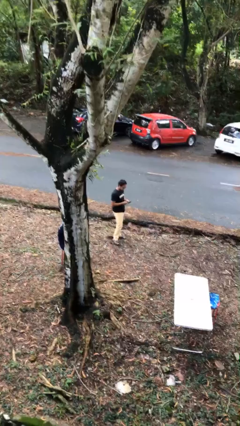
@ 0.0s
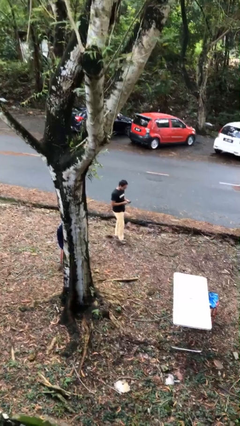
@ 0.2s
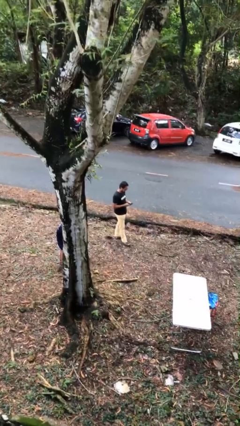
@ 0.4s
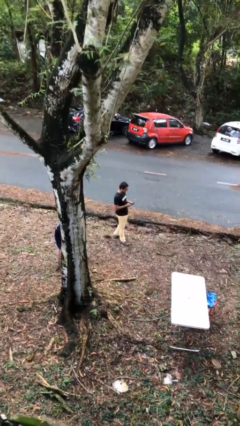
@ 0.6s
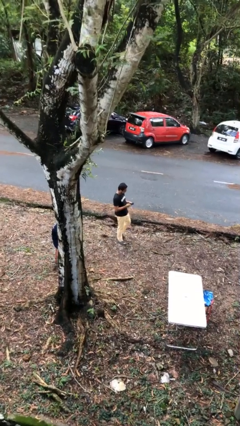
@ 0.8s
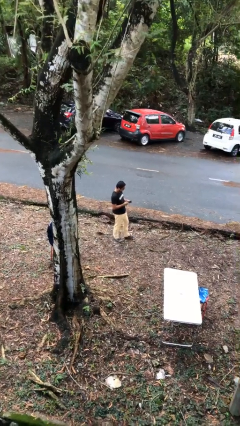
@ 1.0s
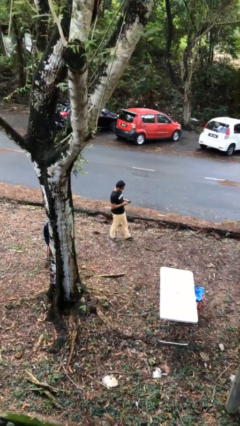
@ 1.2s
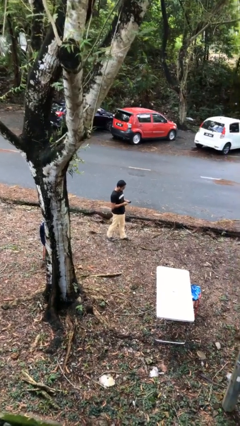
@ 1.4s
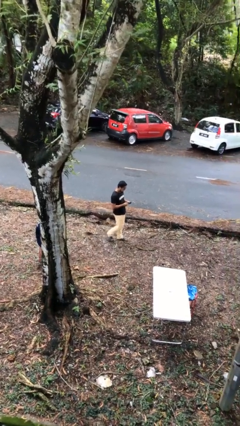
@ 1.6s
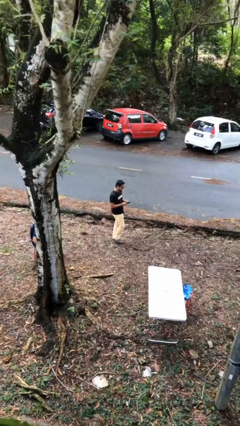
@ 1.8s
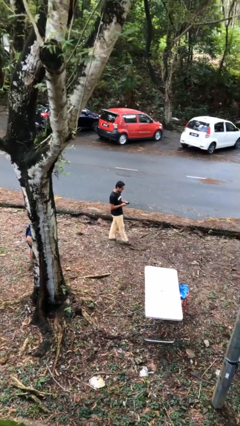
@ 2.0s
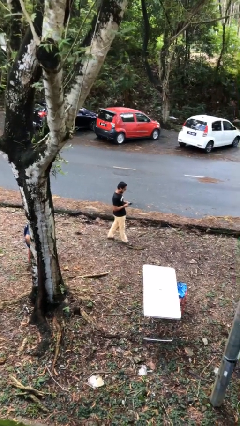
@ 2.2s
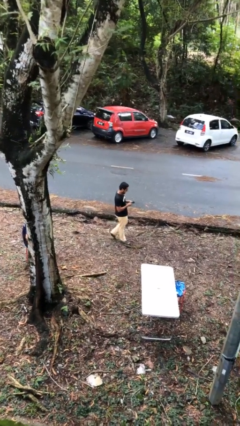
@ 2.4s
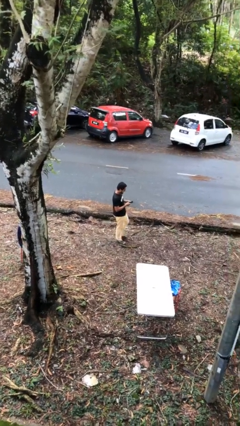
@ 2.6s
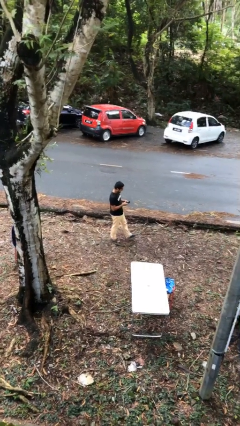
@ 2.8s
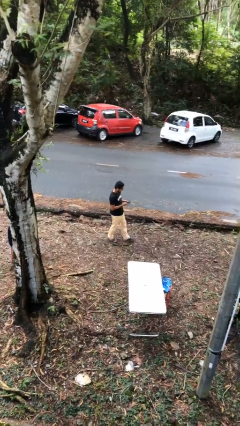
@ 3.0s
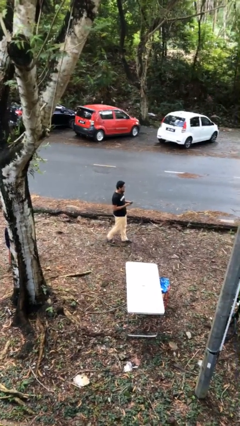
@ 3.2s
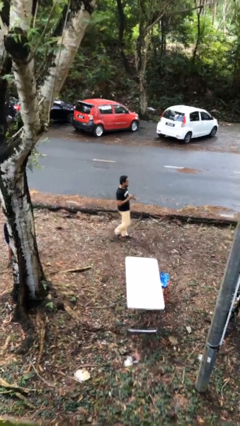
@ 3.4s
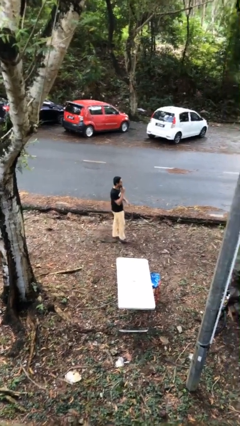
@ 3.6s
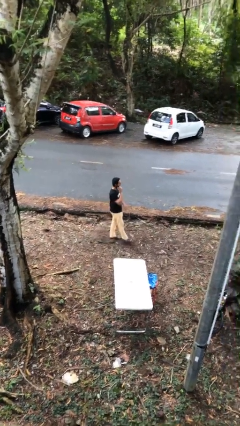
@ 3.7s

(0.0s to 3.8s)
person texts on phone

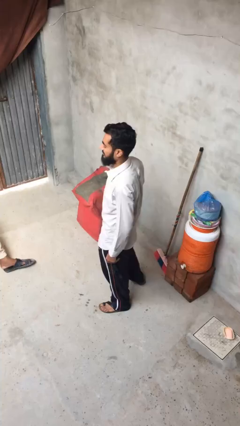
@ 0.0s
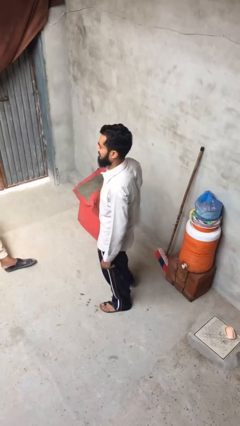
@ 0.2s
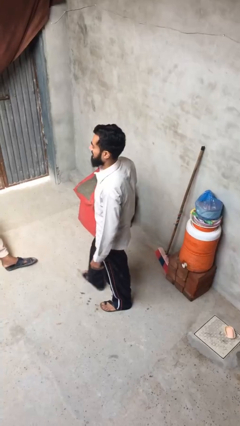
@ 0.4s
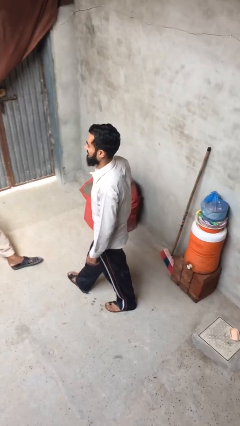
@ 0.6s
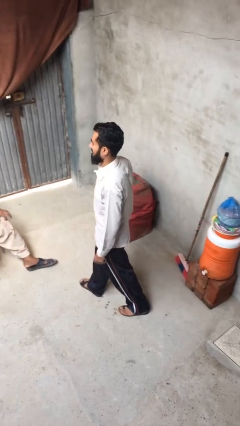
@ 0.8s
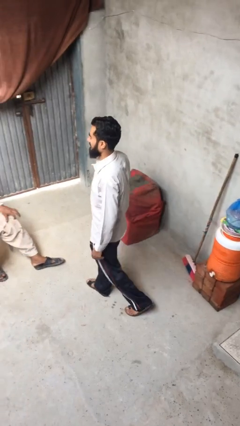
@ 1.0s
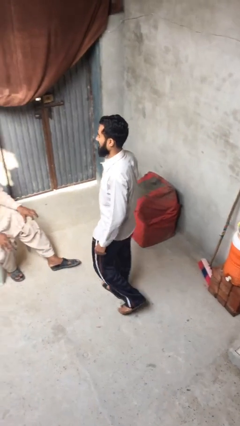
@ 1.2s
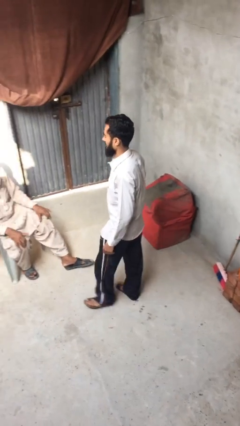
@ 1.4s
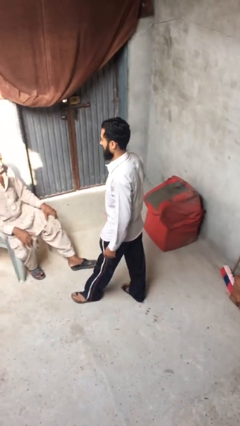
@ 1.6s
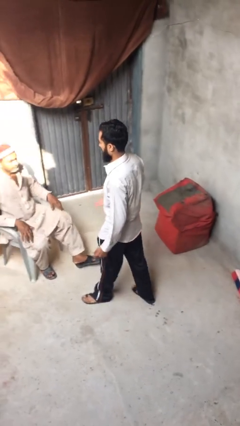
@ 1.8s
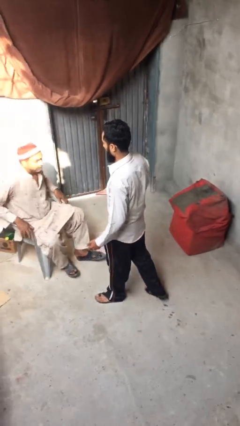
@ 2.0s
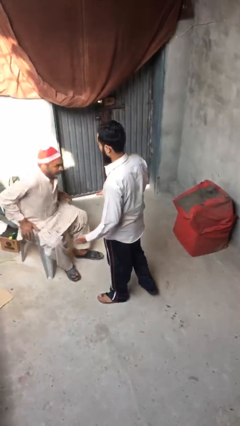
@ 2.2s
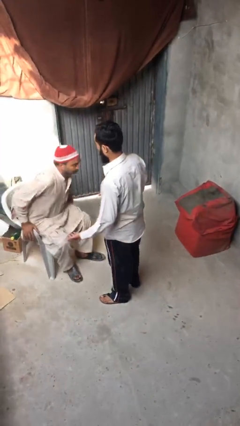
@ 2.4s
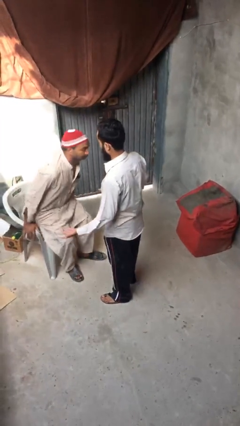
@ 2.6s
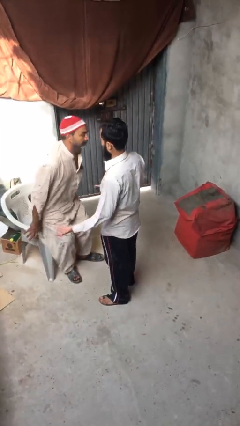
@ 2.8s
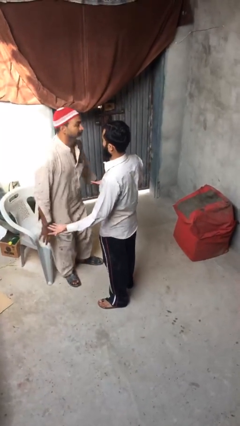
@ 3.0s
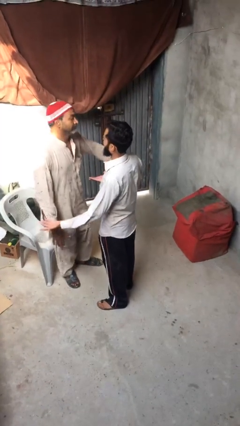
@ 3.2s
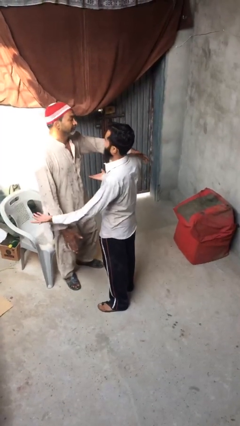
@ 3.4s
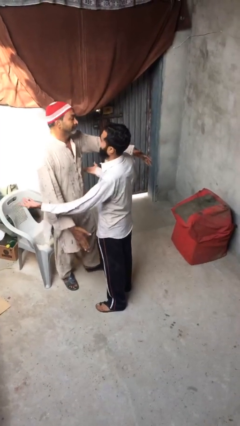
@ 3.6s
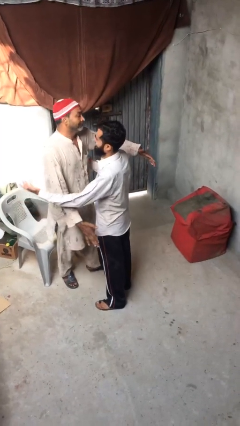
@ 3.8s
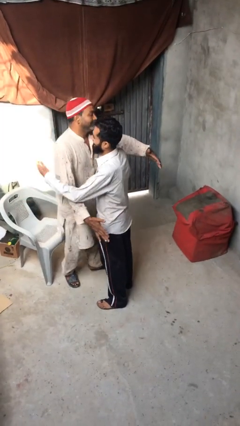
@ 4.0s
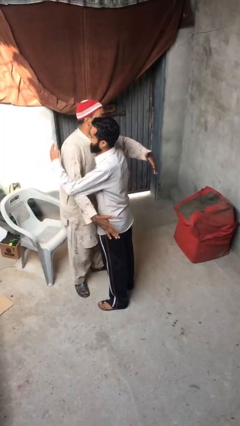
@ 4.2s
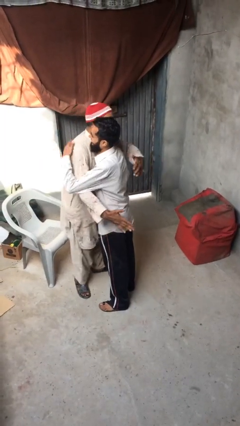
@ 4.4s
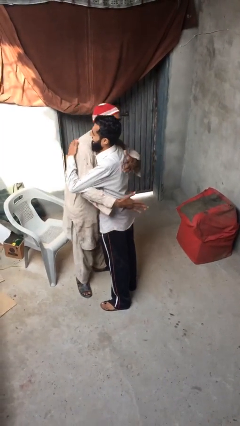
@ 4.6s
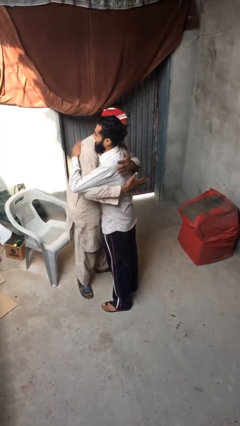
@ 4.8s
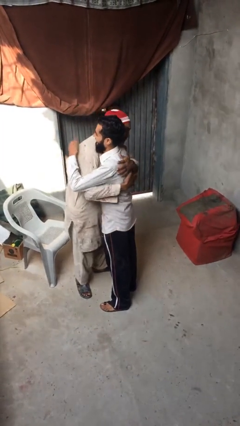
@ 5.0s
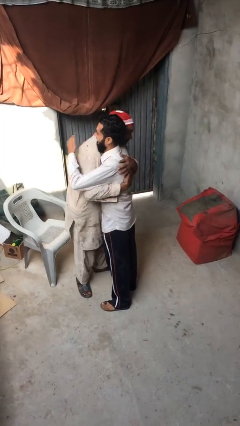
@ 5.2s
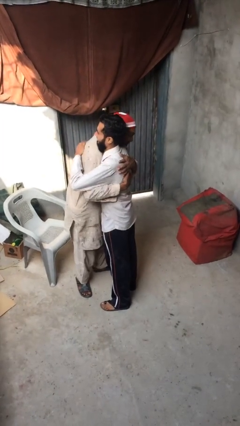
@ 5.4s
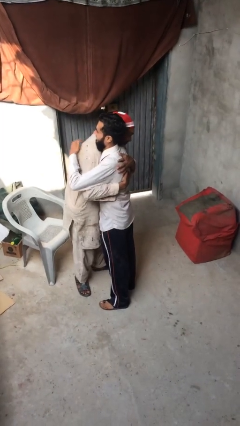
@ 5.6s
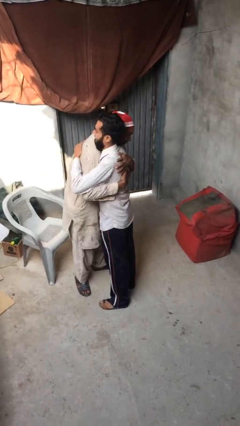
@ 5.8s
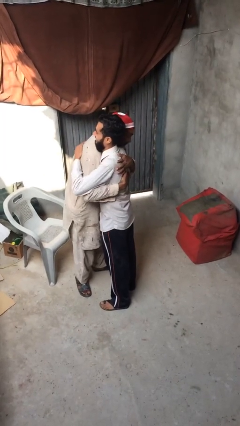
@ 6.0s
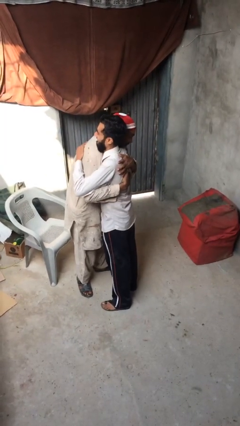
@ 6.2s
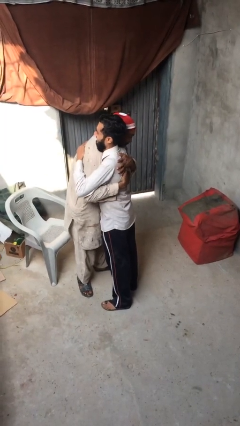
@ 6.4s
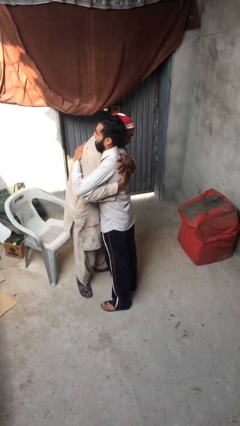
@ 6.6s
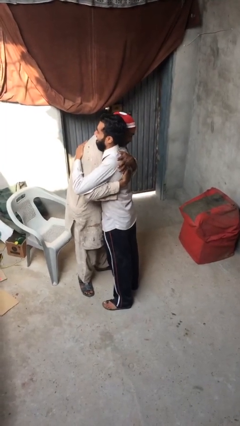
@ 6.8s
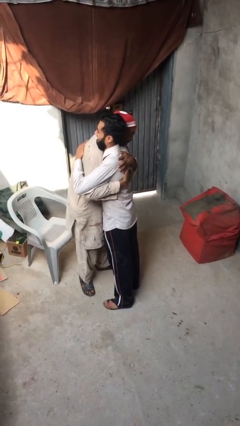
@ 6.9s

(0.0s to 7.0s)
person embraces person

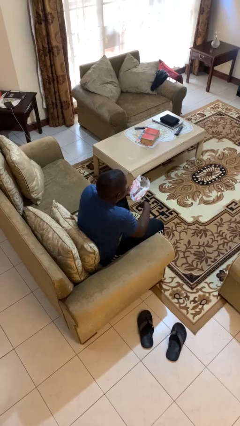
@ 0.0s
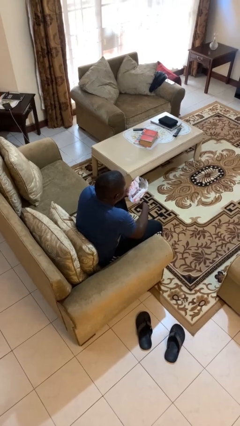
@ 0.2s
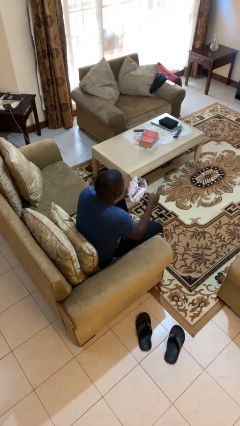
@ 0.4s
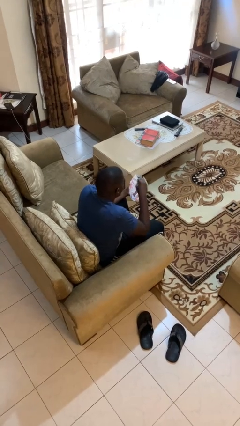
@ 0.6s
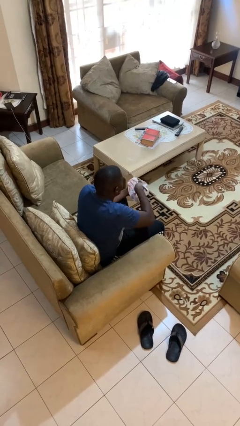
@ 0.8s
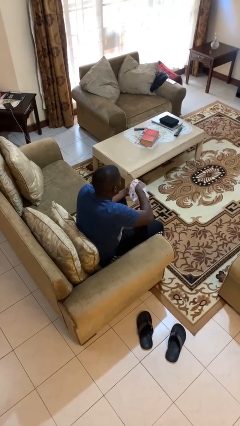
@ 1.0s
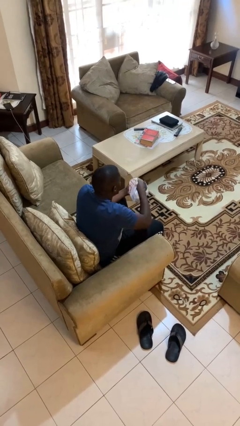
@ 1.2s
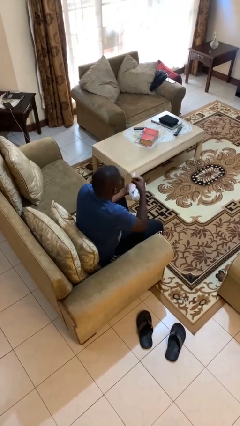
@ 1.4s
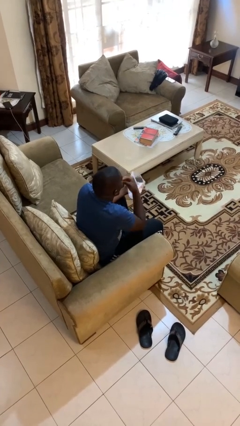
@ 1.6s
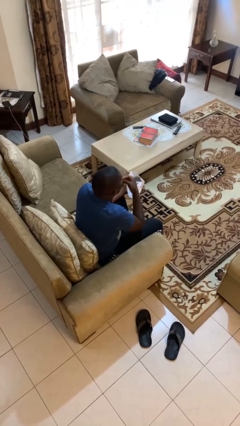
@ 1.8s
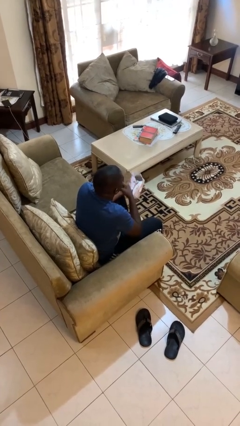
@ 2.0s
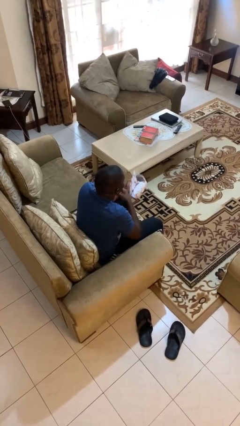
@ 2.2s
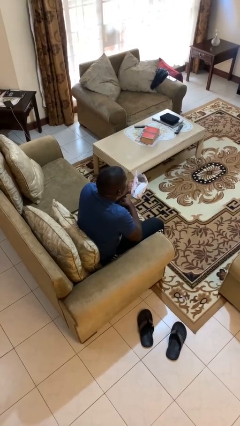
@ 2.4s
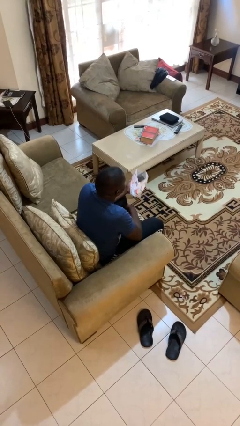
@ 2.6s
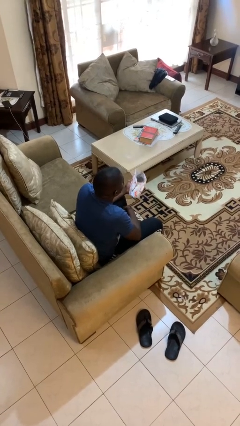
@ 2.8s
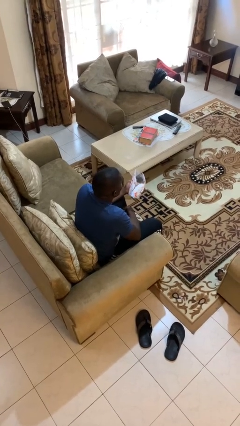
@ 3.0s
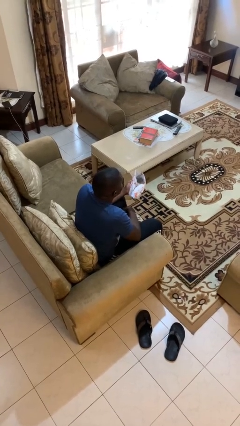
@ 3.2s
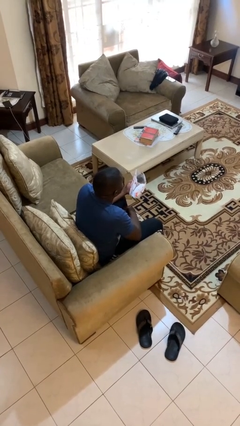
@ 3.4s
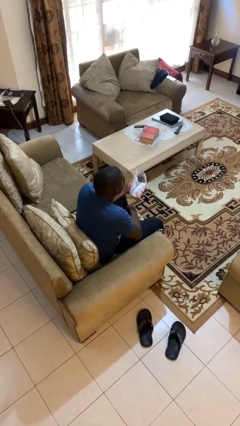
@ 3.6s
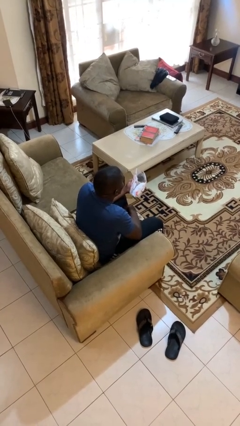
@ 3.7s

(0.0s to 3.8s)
person eats snack from bag

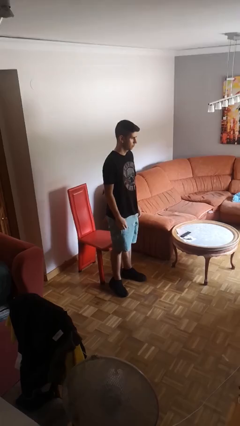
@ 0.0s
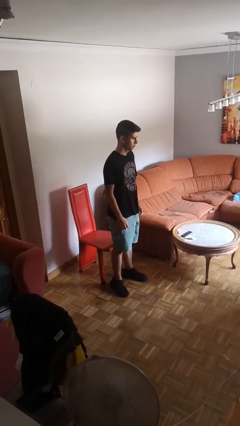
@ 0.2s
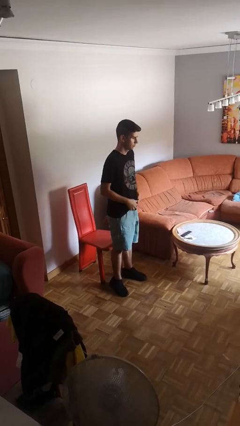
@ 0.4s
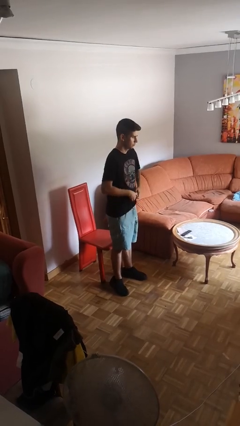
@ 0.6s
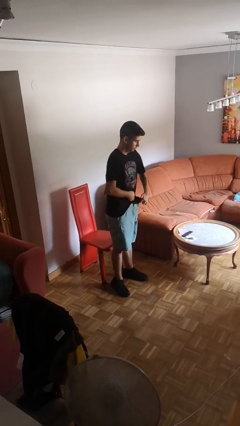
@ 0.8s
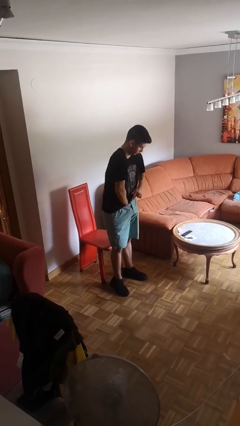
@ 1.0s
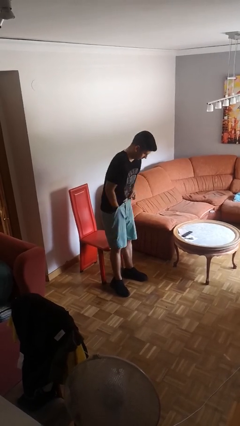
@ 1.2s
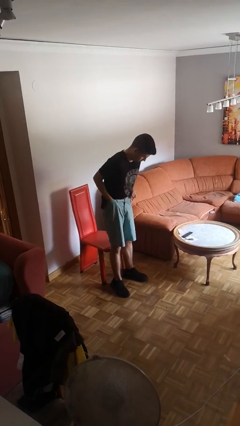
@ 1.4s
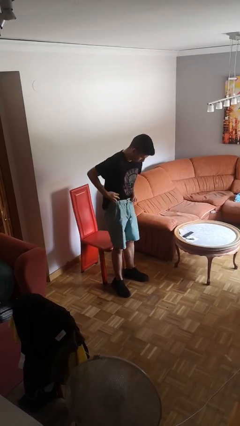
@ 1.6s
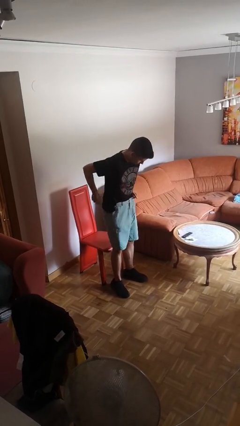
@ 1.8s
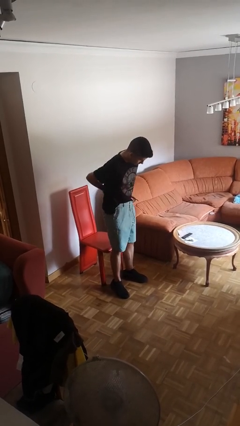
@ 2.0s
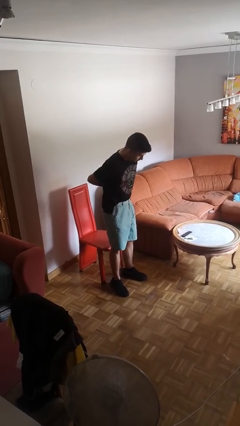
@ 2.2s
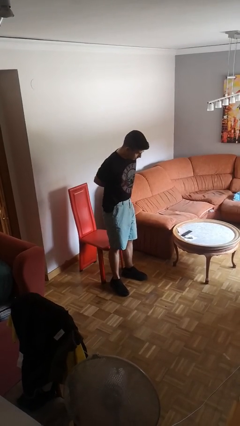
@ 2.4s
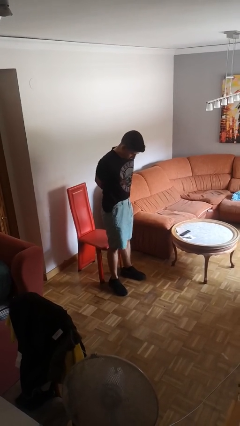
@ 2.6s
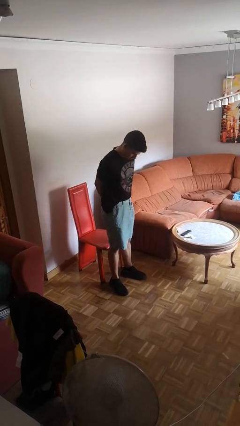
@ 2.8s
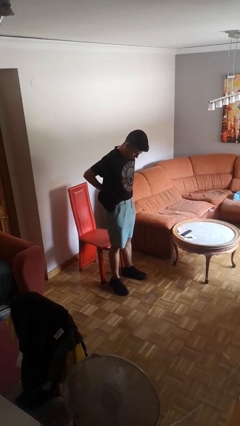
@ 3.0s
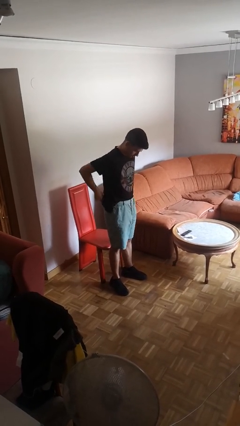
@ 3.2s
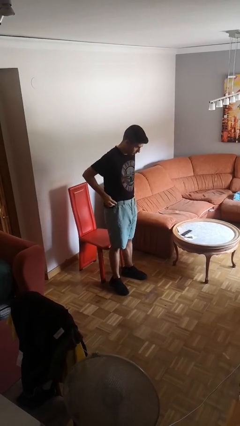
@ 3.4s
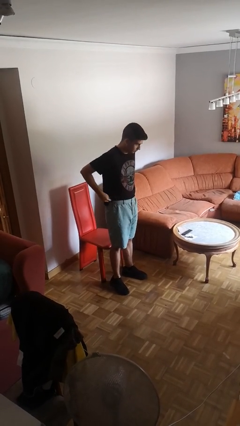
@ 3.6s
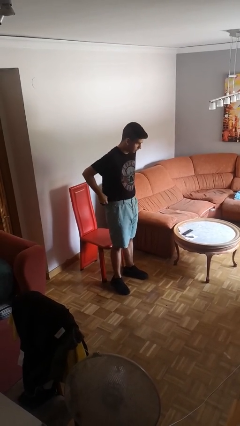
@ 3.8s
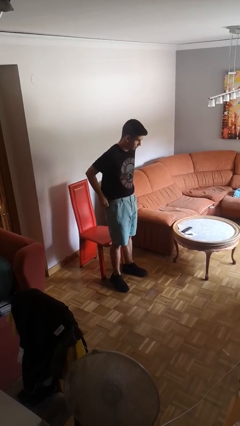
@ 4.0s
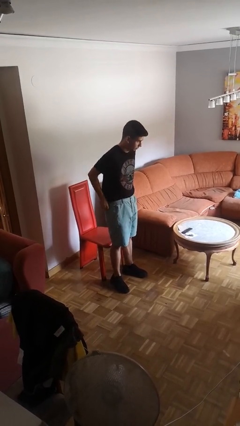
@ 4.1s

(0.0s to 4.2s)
person tucks in shirt
